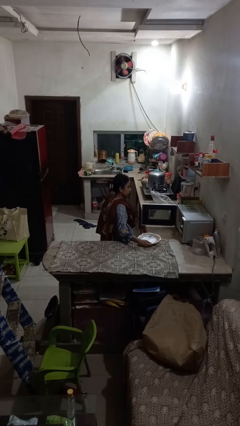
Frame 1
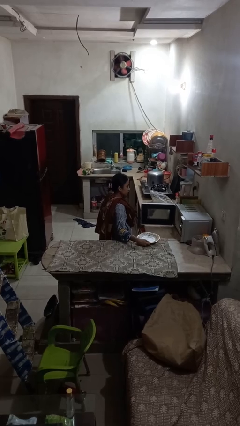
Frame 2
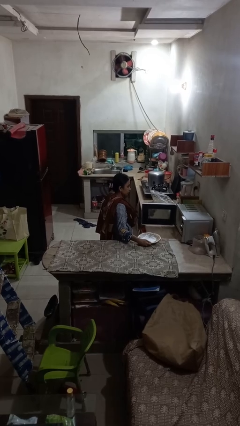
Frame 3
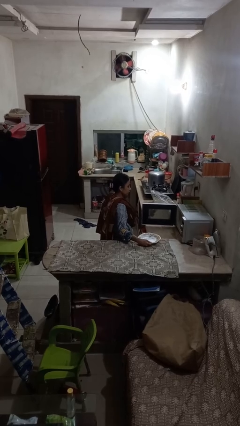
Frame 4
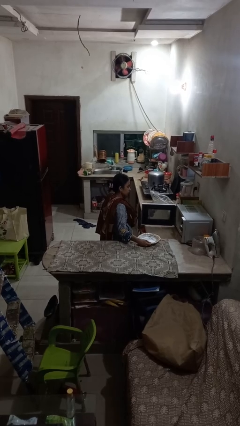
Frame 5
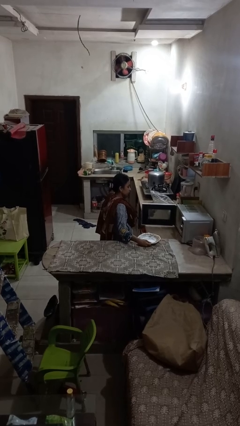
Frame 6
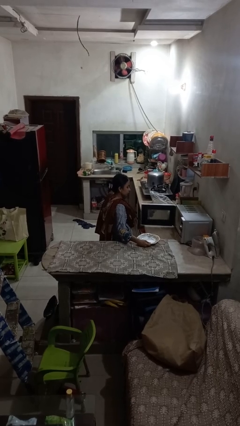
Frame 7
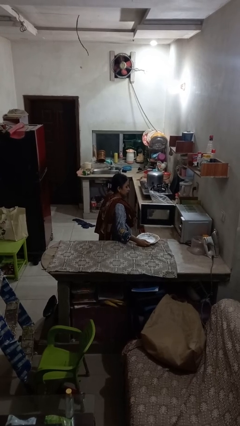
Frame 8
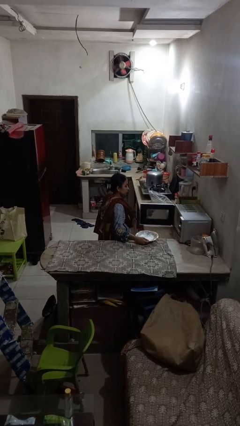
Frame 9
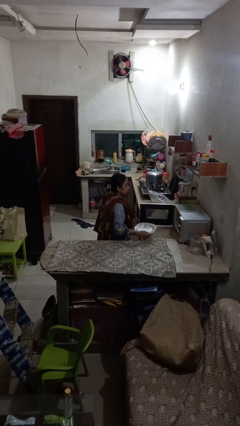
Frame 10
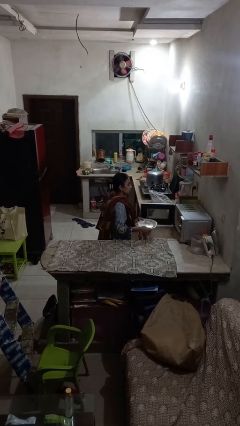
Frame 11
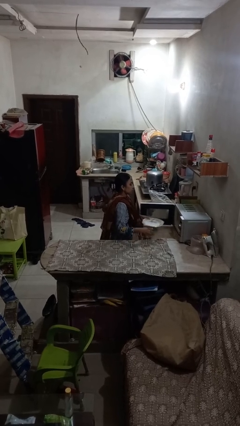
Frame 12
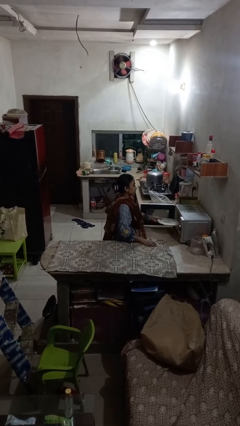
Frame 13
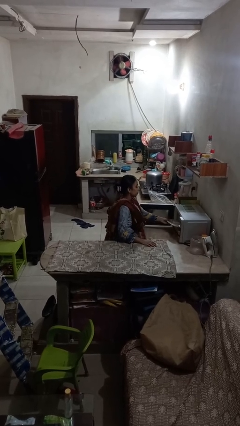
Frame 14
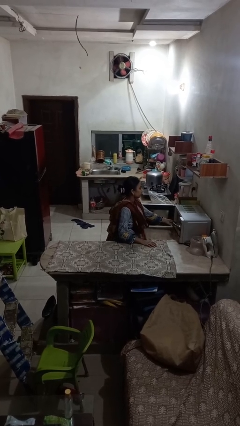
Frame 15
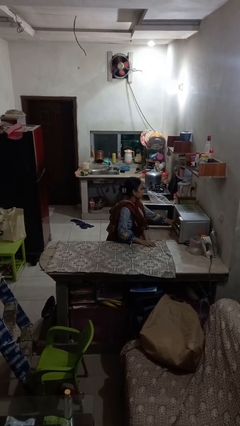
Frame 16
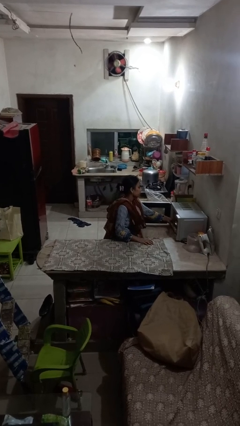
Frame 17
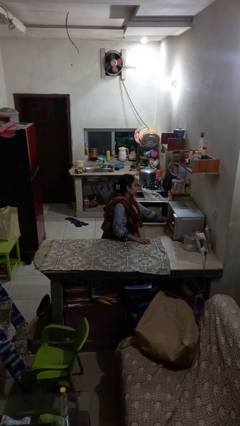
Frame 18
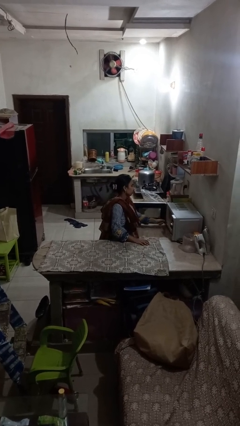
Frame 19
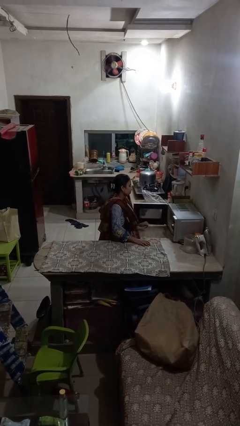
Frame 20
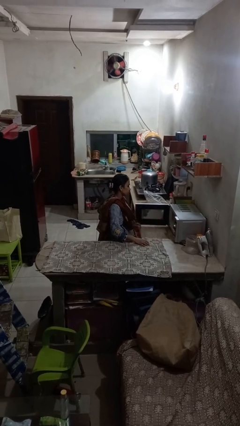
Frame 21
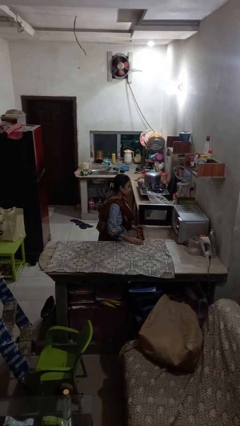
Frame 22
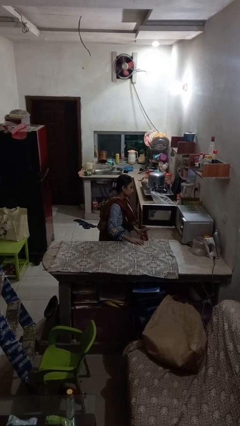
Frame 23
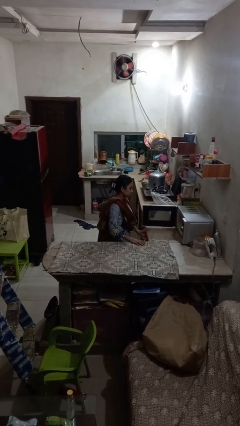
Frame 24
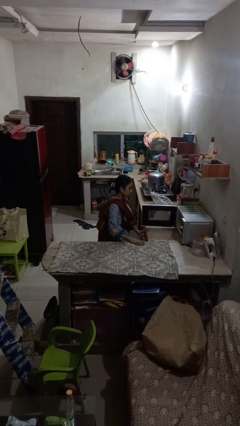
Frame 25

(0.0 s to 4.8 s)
person puts object into microwave

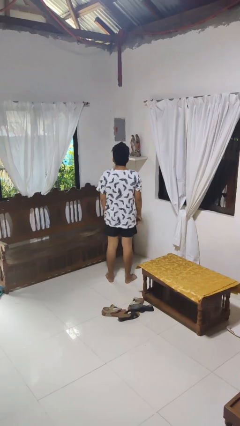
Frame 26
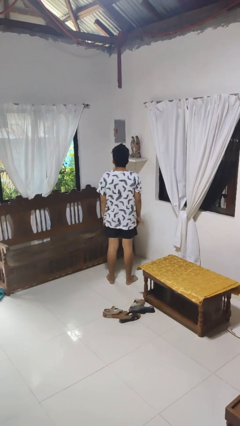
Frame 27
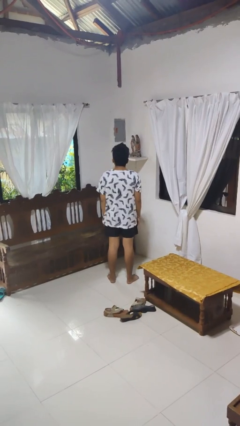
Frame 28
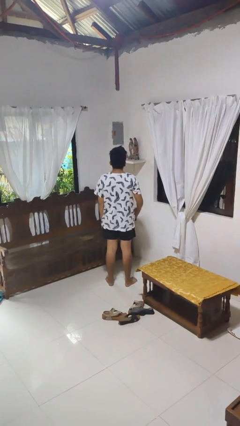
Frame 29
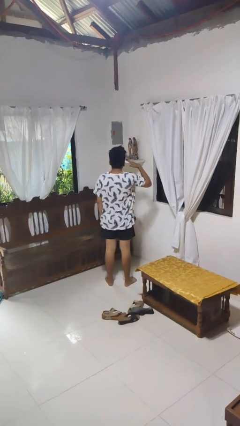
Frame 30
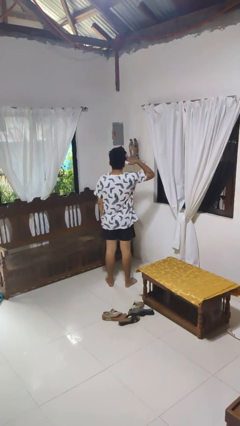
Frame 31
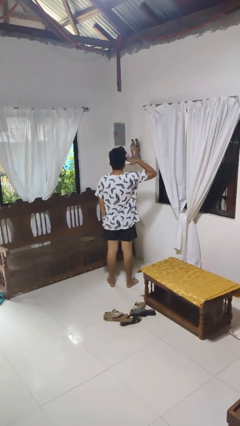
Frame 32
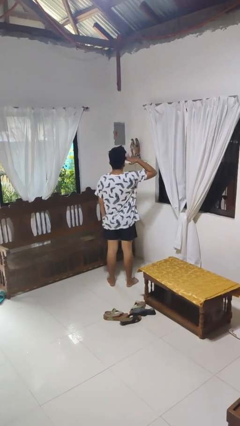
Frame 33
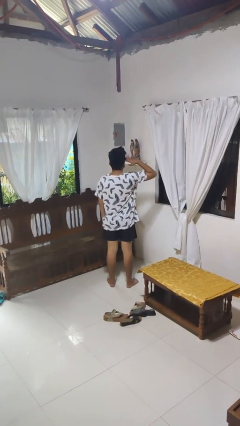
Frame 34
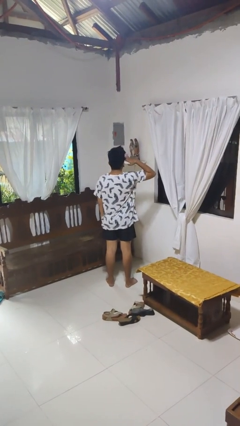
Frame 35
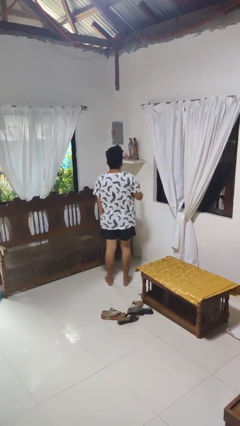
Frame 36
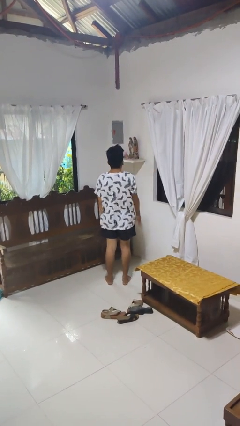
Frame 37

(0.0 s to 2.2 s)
person salutes

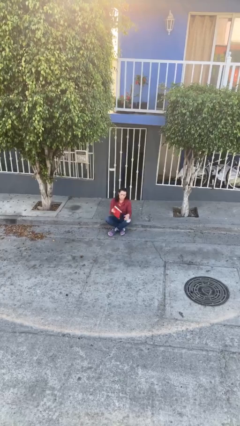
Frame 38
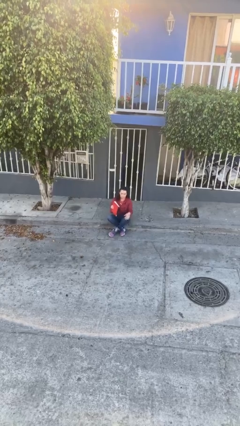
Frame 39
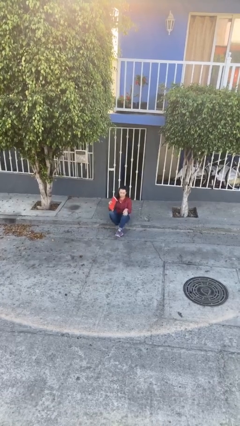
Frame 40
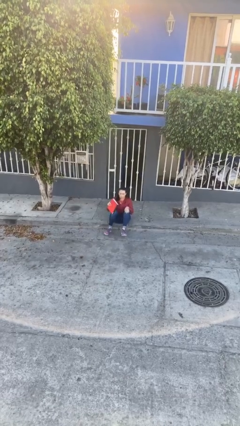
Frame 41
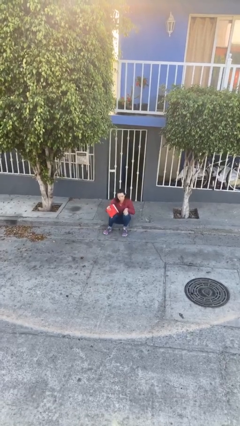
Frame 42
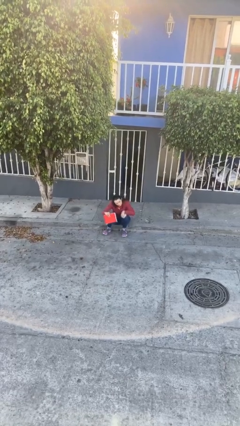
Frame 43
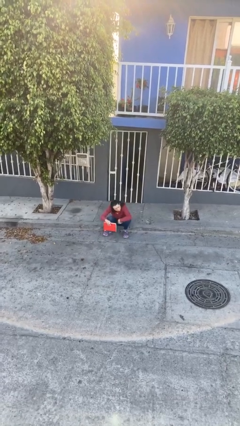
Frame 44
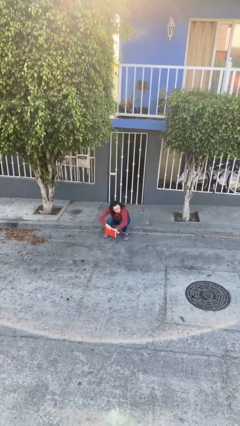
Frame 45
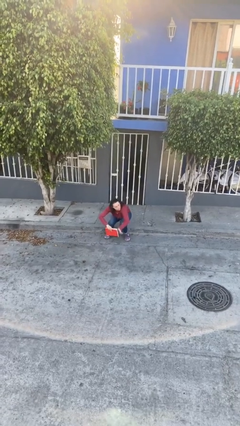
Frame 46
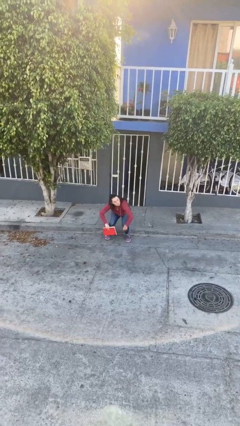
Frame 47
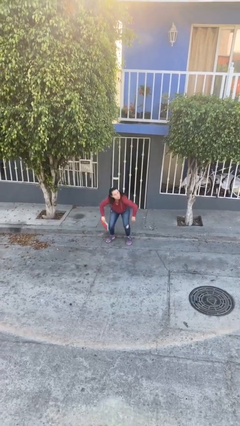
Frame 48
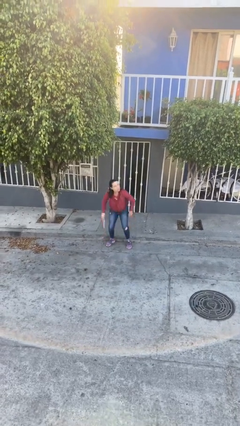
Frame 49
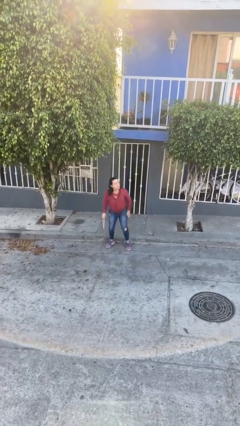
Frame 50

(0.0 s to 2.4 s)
person stands up

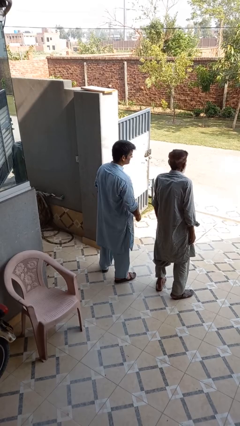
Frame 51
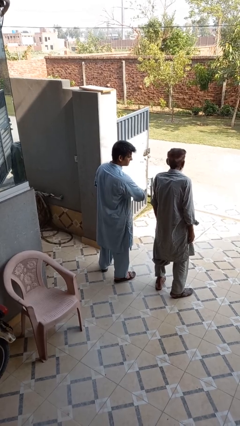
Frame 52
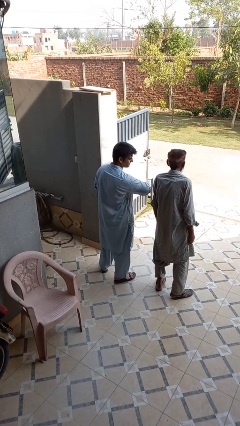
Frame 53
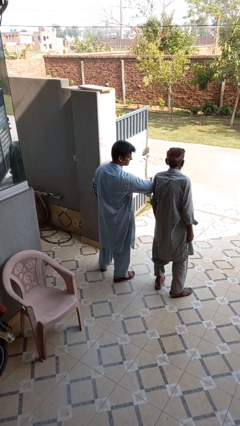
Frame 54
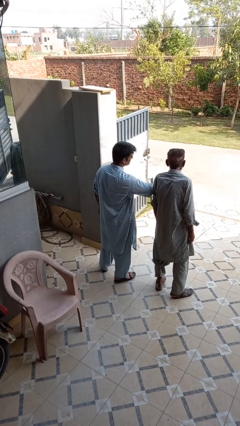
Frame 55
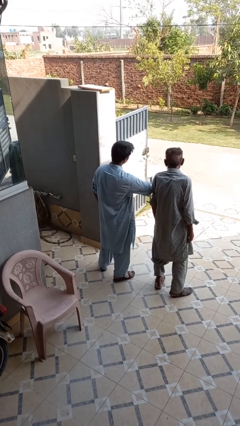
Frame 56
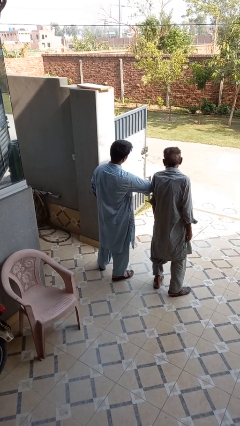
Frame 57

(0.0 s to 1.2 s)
person nudges person with elbow

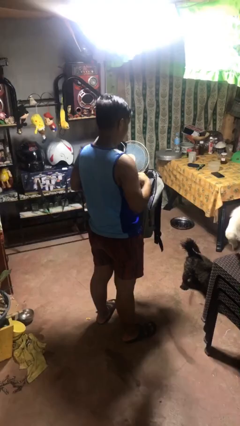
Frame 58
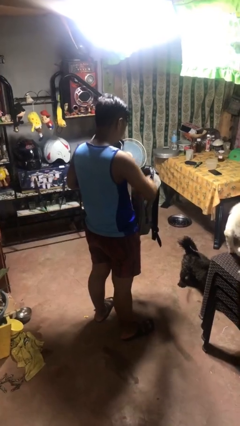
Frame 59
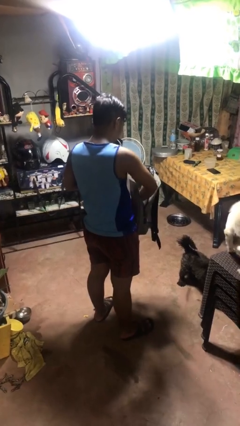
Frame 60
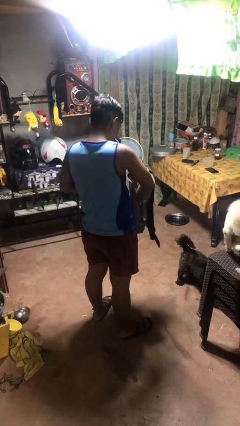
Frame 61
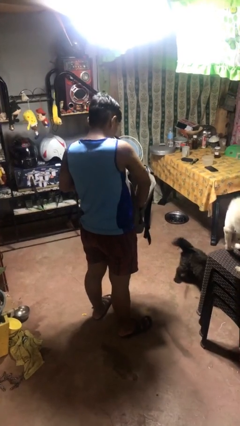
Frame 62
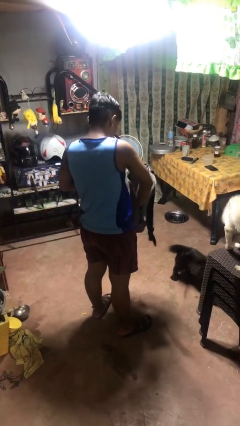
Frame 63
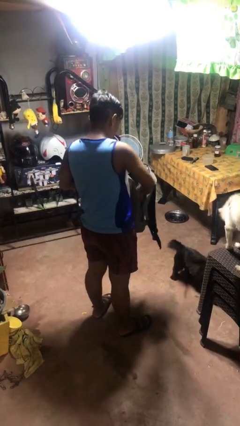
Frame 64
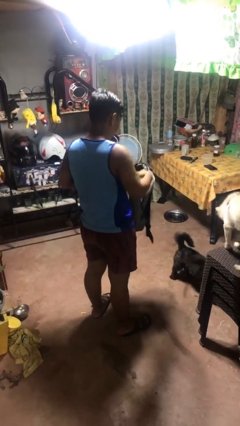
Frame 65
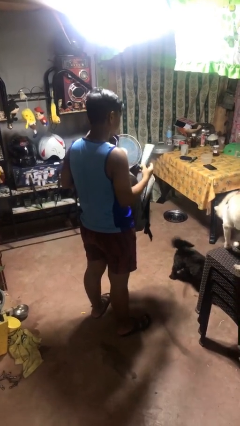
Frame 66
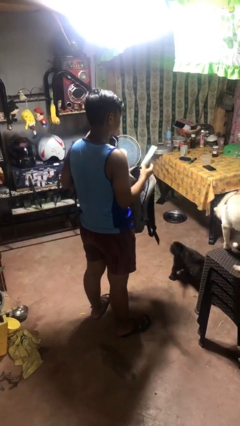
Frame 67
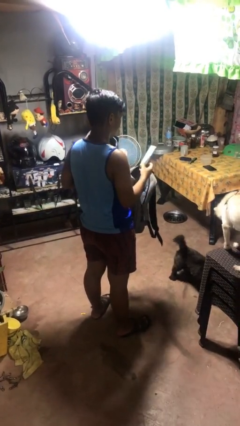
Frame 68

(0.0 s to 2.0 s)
person takes object from bag

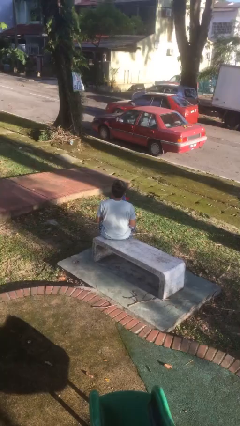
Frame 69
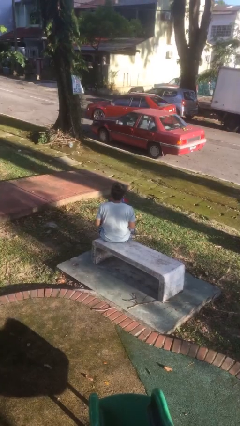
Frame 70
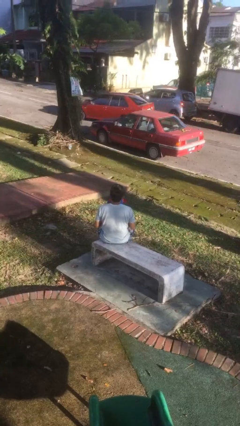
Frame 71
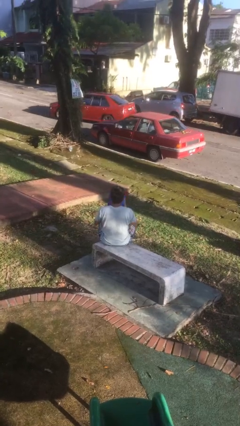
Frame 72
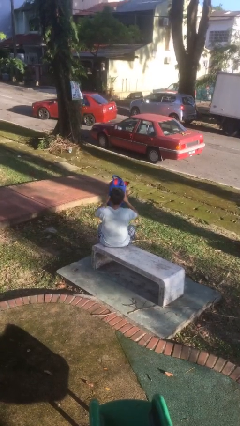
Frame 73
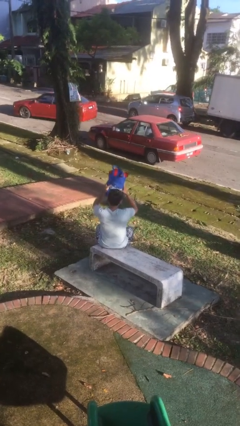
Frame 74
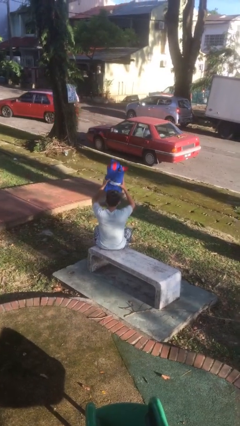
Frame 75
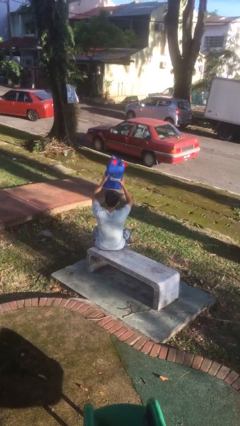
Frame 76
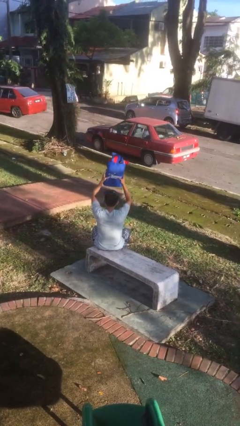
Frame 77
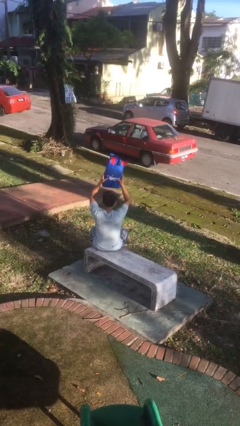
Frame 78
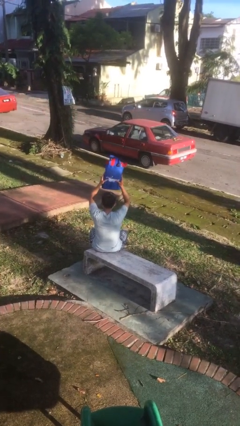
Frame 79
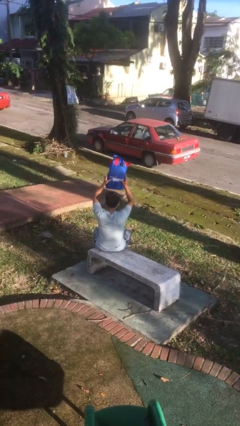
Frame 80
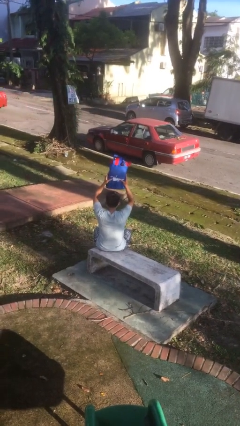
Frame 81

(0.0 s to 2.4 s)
person holds object above head

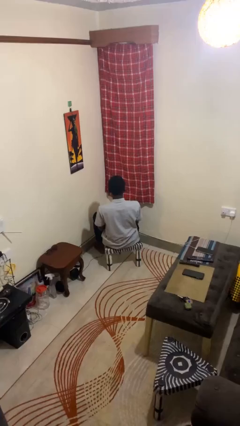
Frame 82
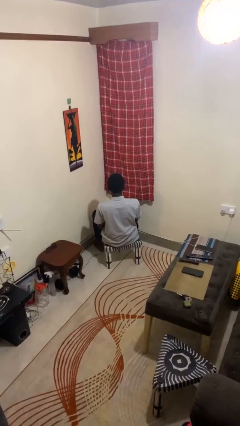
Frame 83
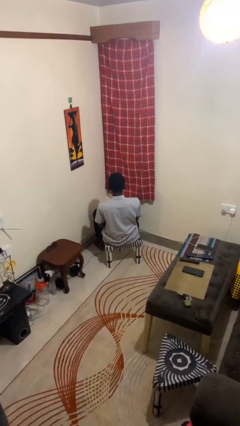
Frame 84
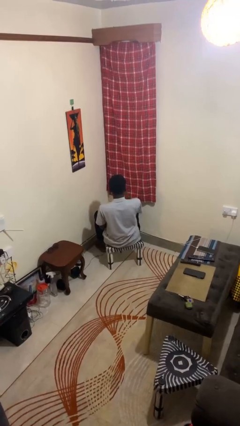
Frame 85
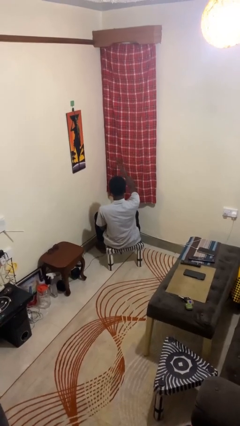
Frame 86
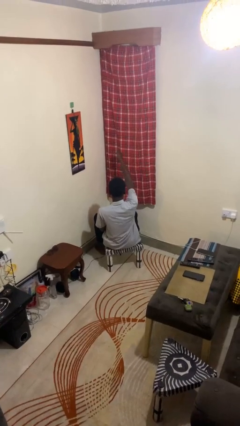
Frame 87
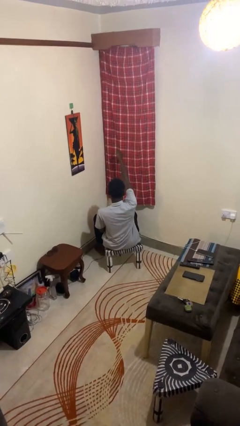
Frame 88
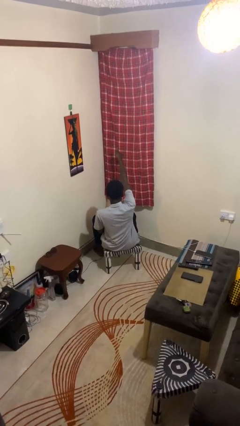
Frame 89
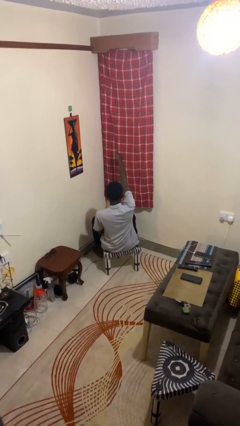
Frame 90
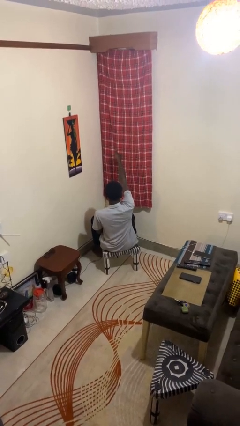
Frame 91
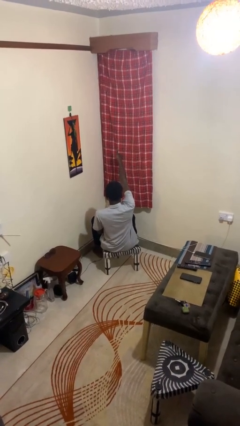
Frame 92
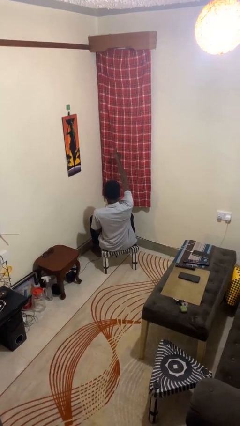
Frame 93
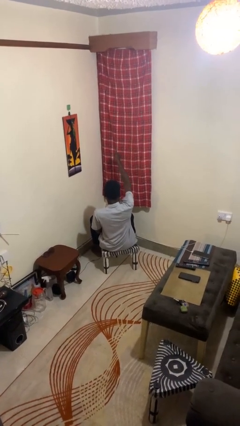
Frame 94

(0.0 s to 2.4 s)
person gestures thumbs up
